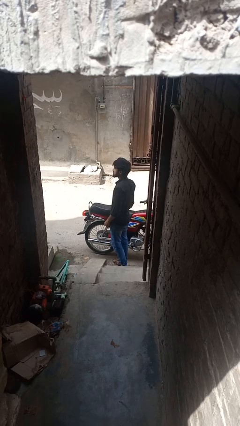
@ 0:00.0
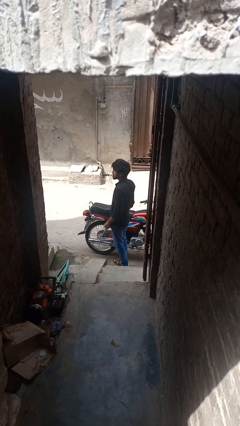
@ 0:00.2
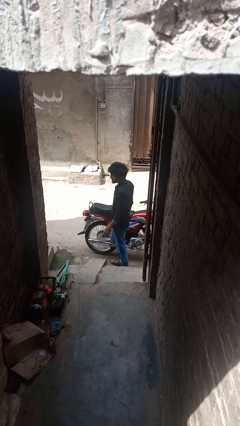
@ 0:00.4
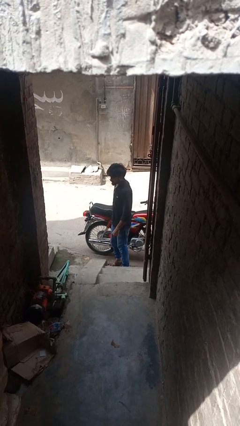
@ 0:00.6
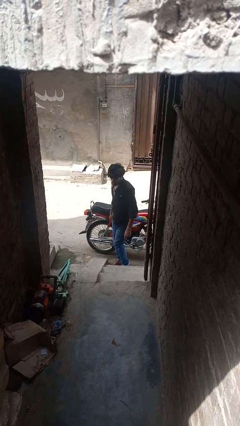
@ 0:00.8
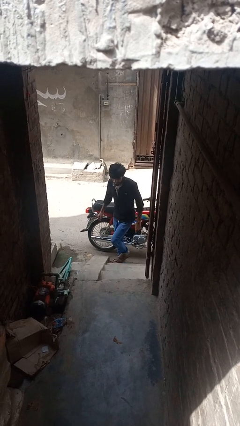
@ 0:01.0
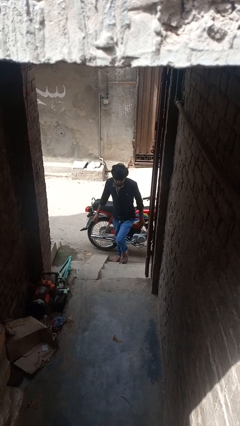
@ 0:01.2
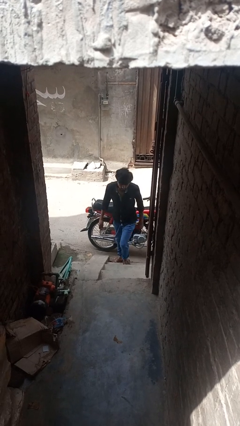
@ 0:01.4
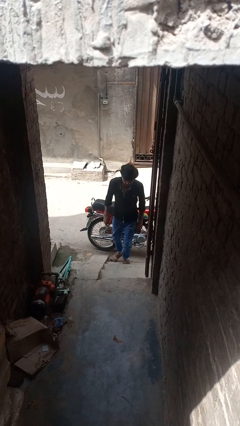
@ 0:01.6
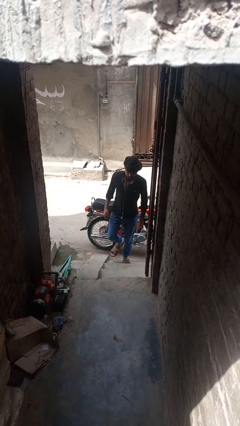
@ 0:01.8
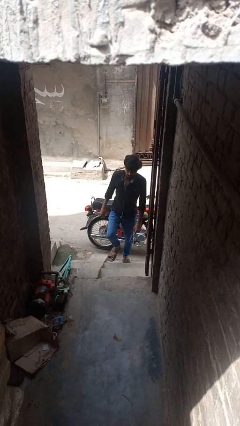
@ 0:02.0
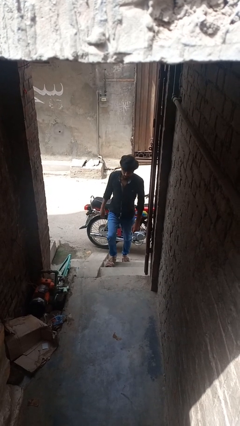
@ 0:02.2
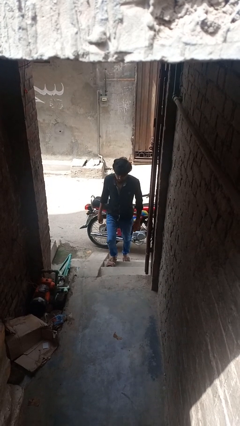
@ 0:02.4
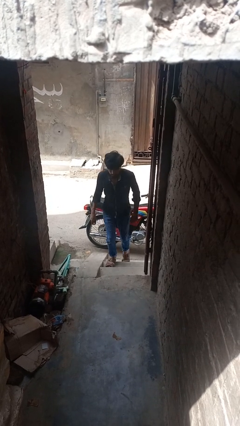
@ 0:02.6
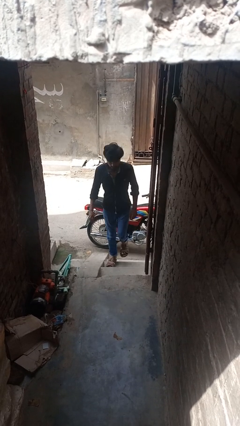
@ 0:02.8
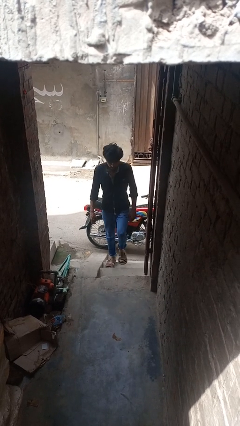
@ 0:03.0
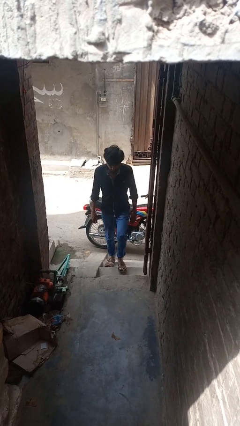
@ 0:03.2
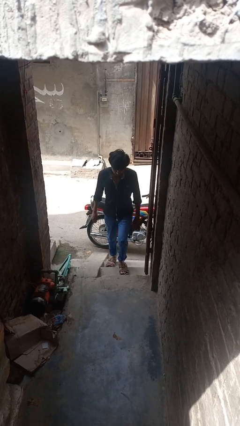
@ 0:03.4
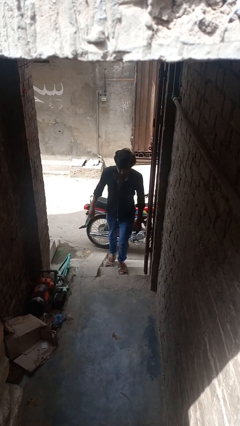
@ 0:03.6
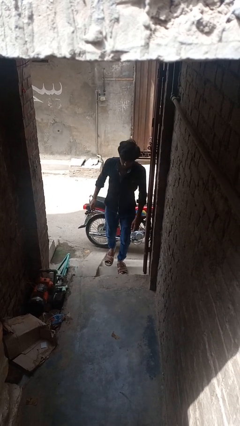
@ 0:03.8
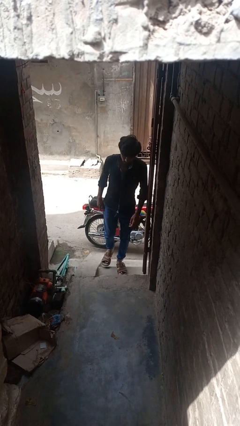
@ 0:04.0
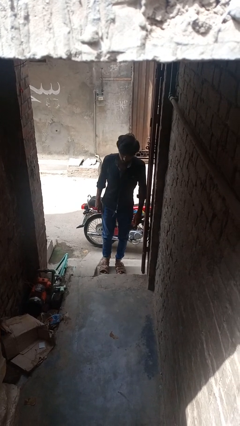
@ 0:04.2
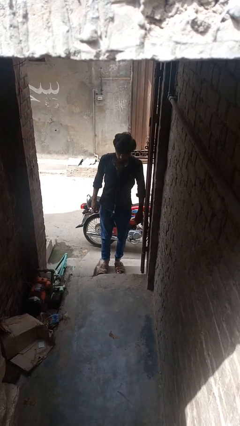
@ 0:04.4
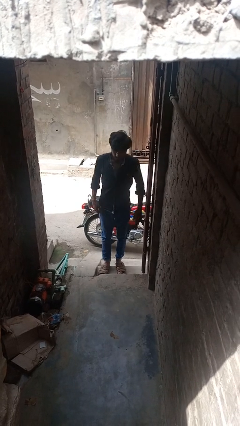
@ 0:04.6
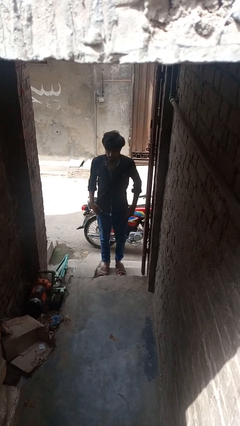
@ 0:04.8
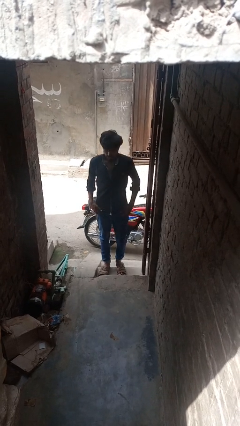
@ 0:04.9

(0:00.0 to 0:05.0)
person climbs up stairs

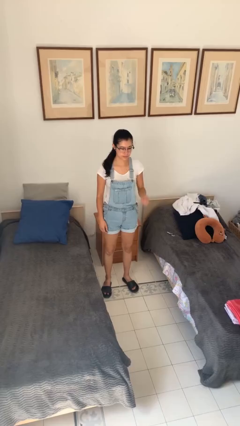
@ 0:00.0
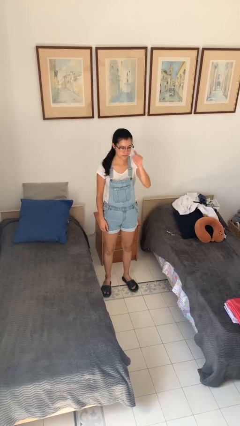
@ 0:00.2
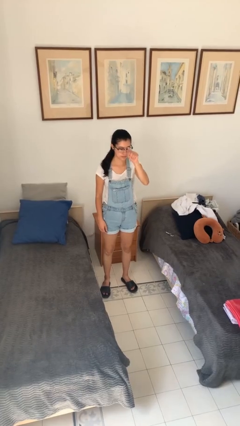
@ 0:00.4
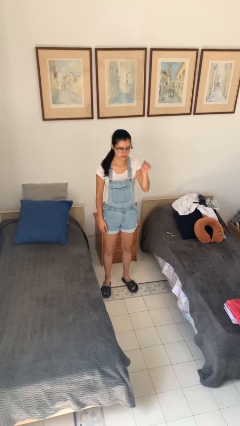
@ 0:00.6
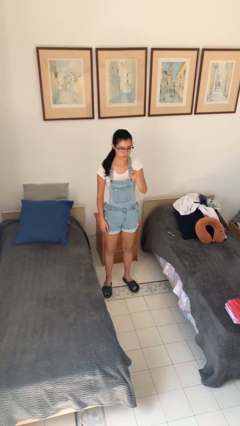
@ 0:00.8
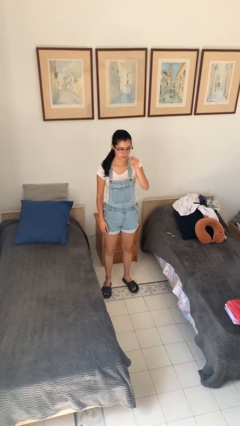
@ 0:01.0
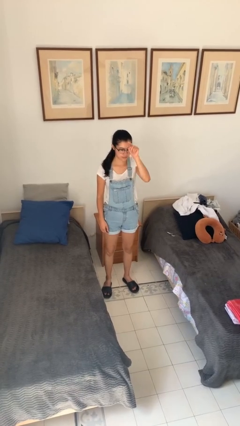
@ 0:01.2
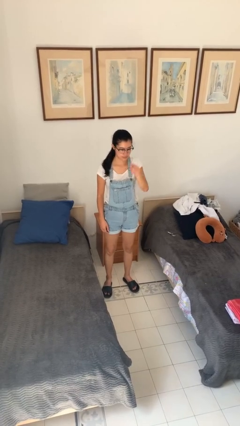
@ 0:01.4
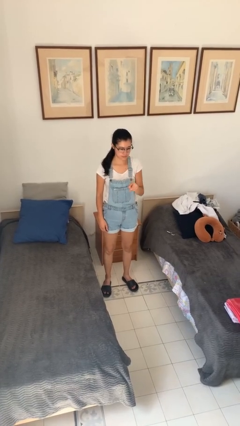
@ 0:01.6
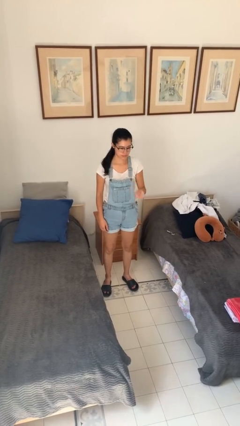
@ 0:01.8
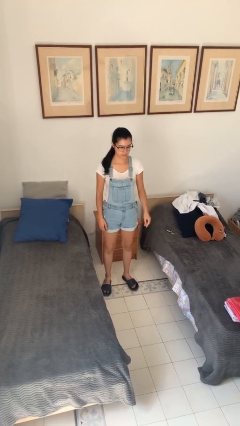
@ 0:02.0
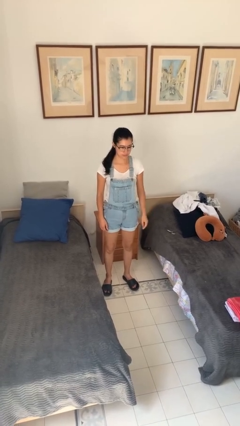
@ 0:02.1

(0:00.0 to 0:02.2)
person gestures number four

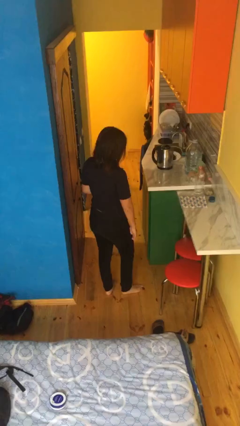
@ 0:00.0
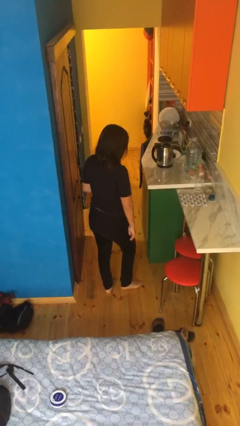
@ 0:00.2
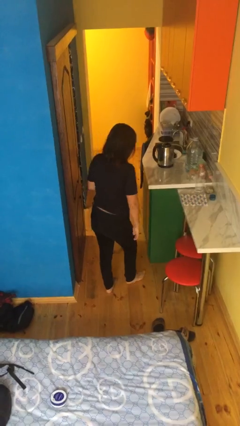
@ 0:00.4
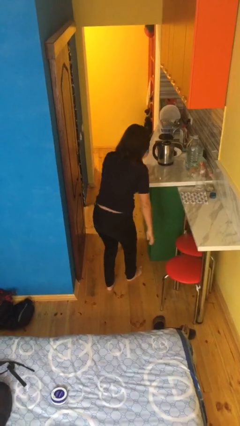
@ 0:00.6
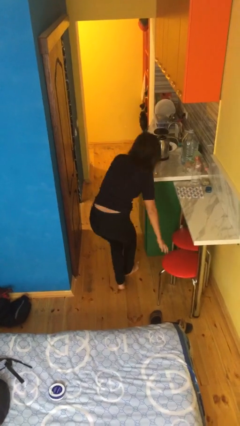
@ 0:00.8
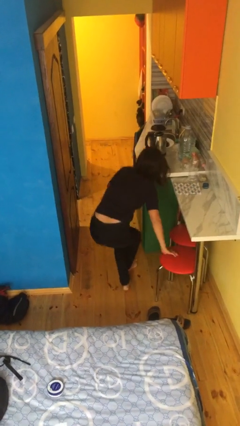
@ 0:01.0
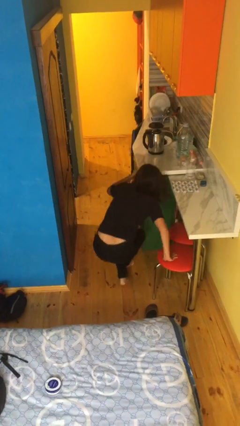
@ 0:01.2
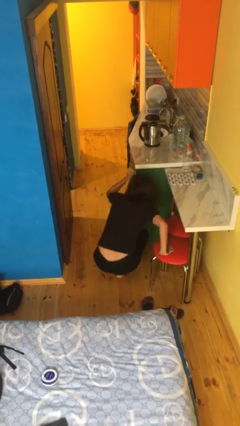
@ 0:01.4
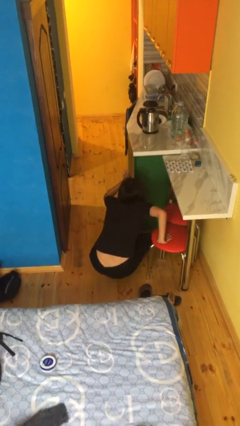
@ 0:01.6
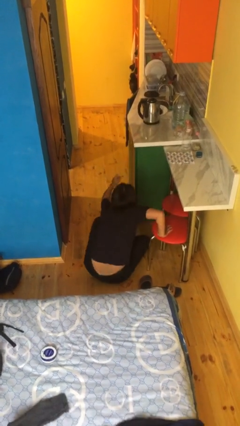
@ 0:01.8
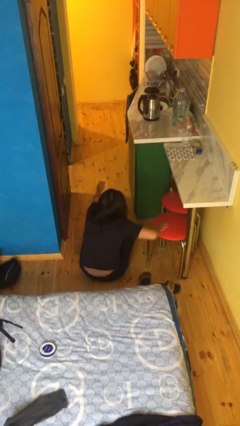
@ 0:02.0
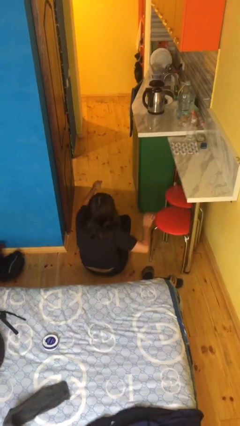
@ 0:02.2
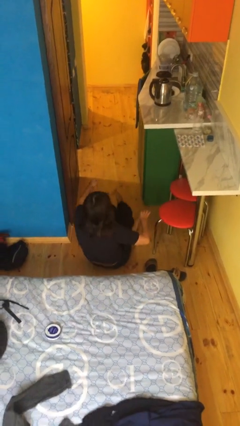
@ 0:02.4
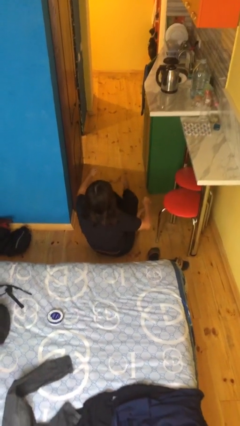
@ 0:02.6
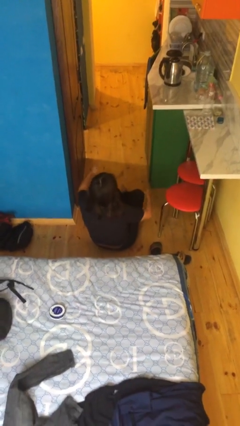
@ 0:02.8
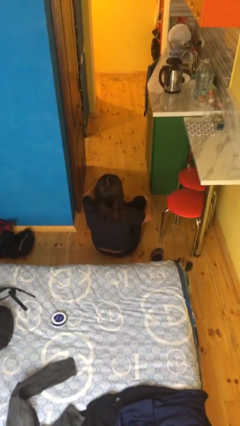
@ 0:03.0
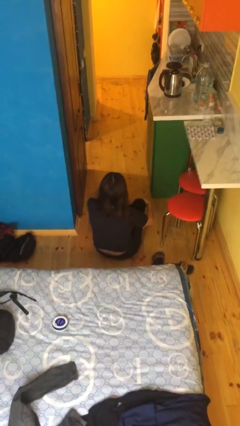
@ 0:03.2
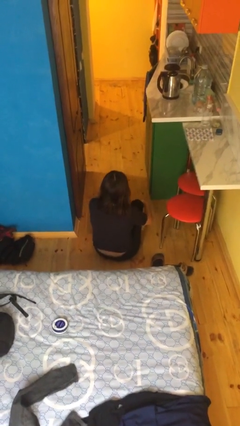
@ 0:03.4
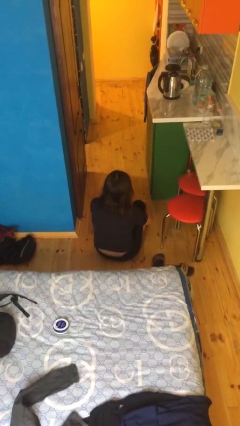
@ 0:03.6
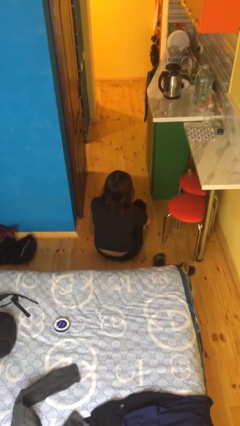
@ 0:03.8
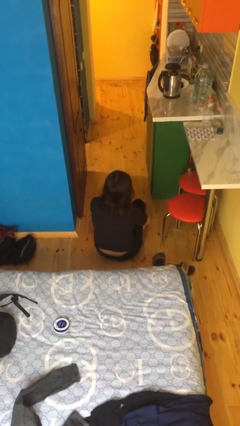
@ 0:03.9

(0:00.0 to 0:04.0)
person sits crisscross

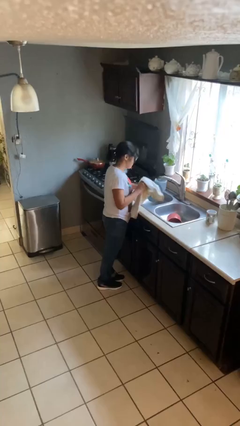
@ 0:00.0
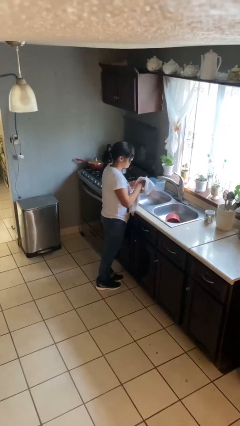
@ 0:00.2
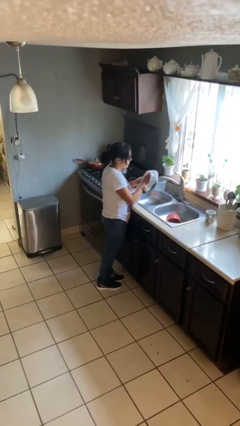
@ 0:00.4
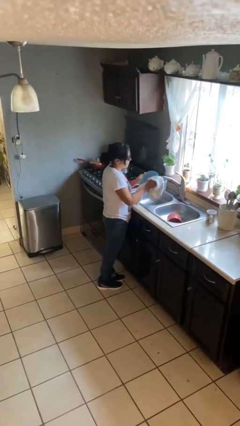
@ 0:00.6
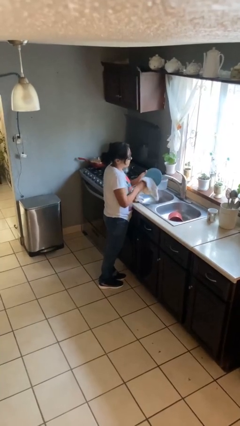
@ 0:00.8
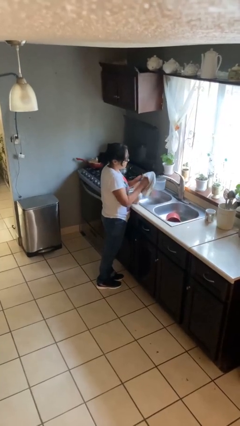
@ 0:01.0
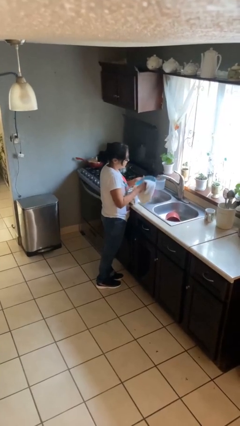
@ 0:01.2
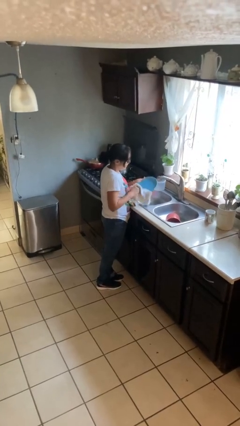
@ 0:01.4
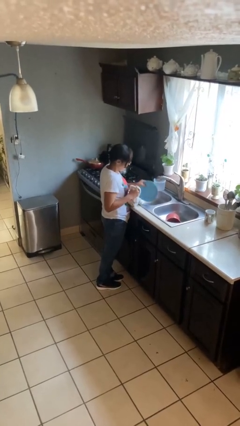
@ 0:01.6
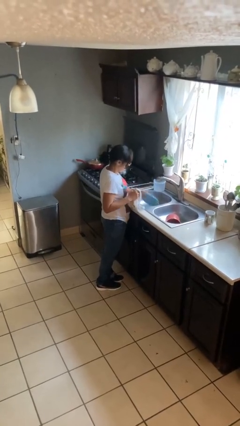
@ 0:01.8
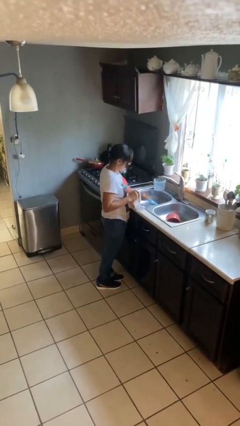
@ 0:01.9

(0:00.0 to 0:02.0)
person dries dish

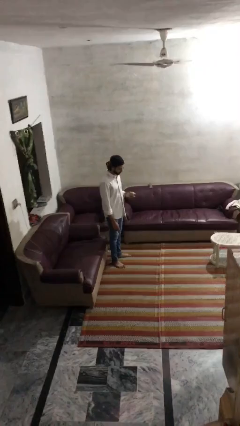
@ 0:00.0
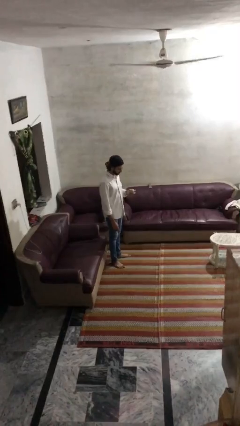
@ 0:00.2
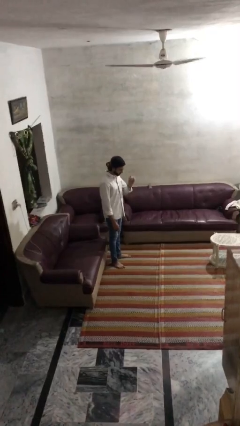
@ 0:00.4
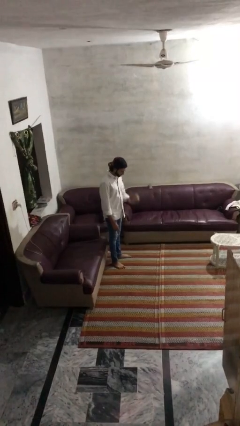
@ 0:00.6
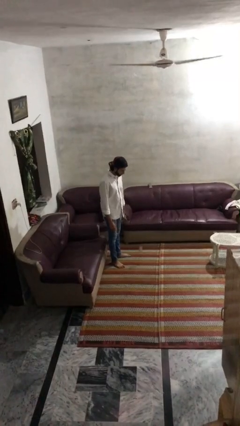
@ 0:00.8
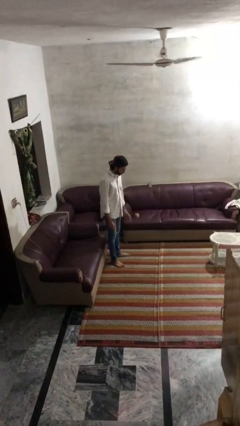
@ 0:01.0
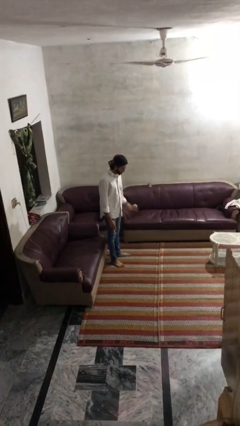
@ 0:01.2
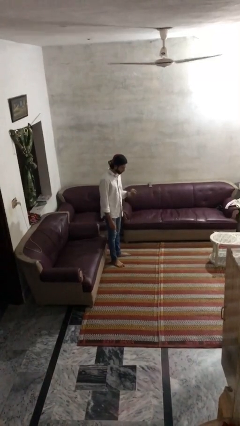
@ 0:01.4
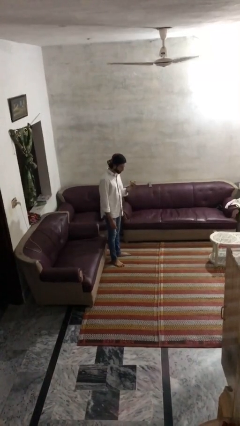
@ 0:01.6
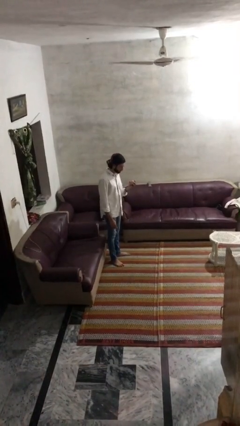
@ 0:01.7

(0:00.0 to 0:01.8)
person bounces ball on floor

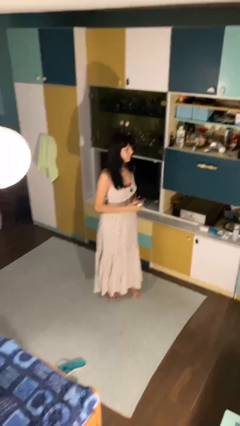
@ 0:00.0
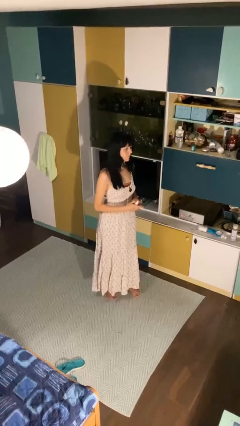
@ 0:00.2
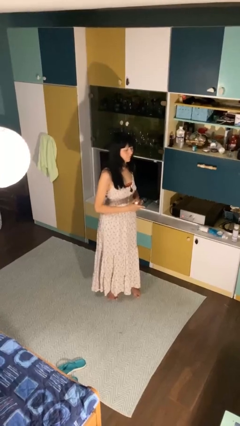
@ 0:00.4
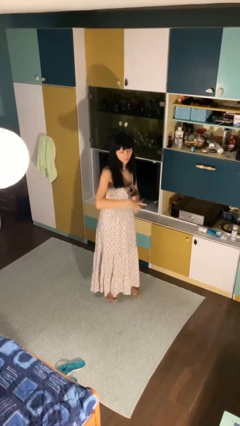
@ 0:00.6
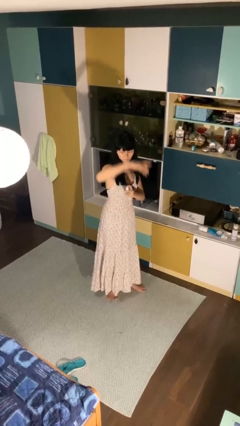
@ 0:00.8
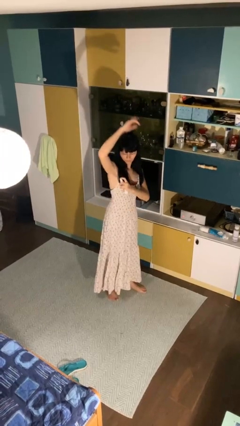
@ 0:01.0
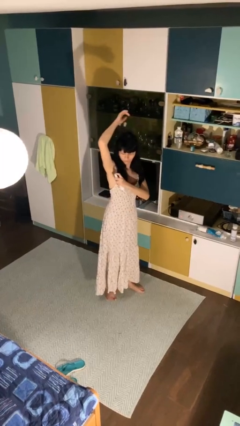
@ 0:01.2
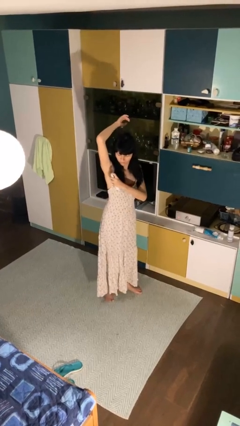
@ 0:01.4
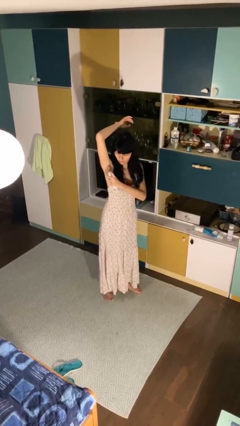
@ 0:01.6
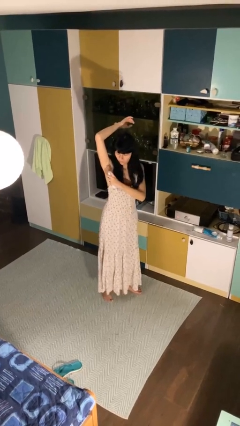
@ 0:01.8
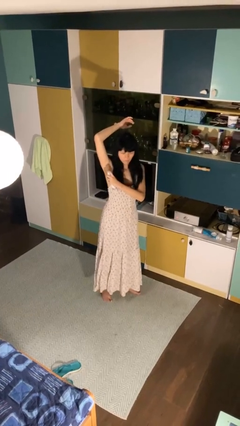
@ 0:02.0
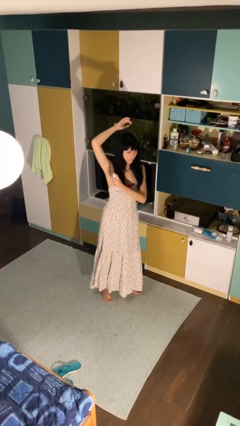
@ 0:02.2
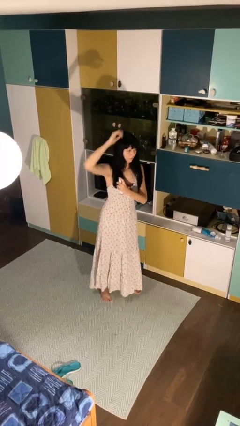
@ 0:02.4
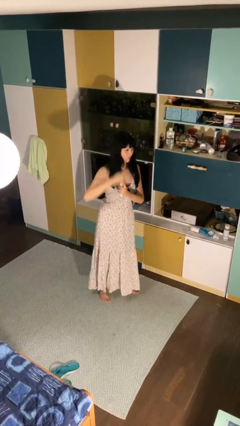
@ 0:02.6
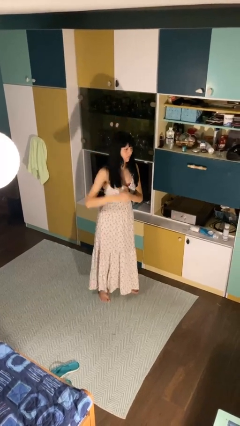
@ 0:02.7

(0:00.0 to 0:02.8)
person applies deodorant
